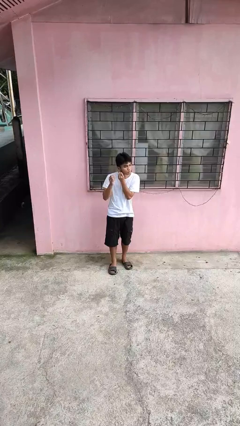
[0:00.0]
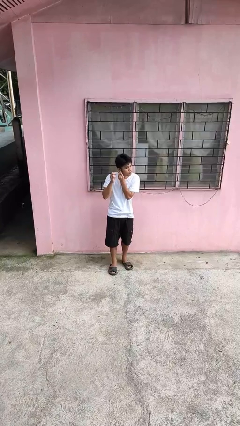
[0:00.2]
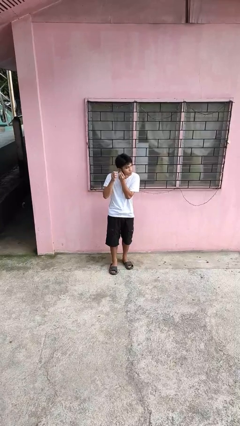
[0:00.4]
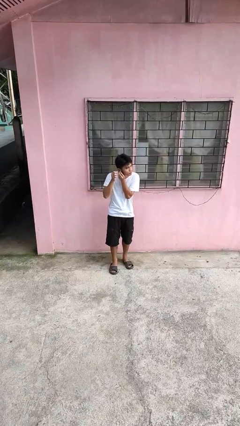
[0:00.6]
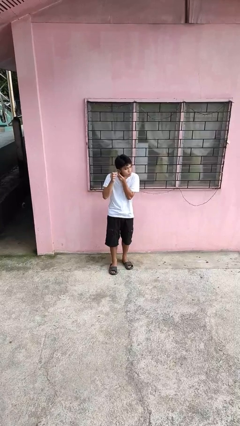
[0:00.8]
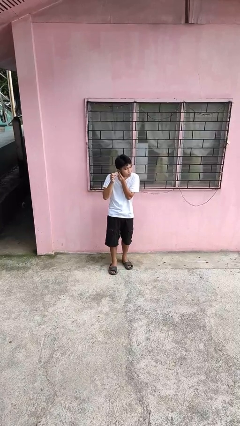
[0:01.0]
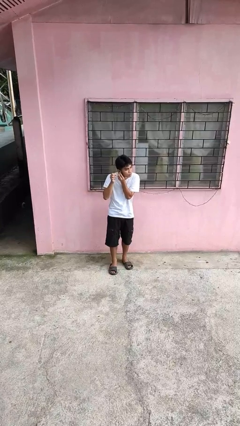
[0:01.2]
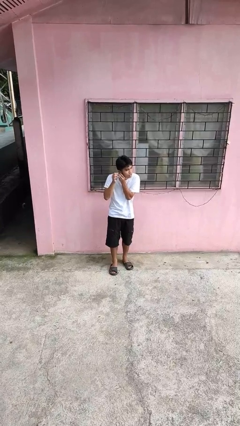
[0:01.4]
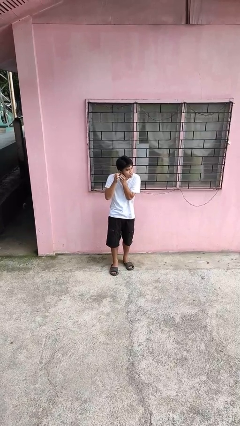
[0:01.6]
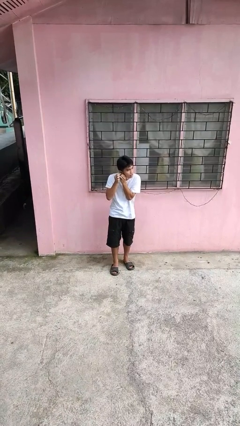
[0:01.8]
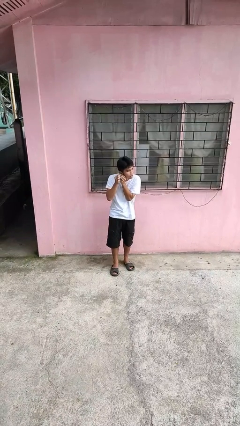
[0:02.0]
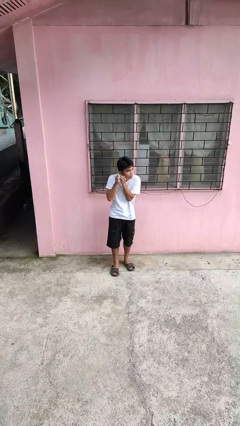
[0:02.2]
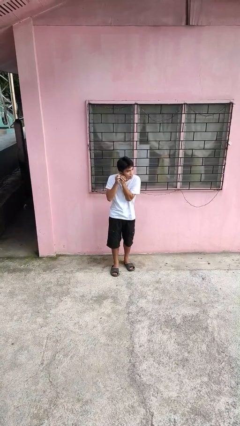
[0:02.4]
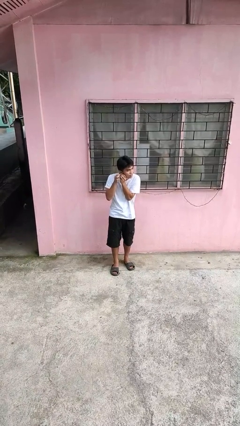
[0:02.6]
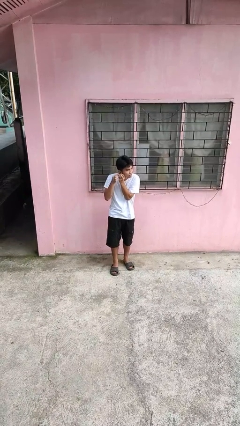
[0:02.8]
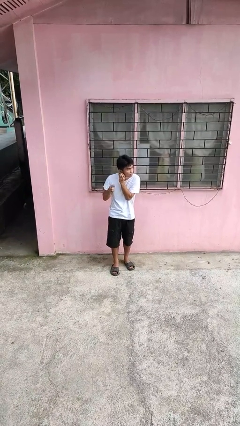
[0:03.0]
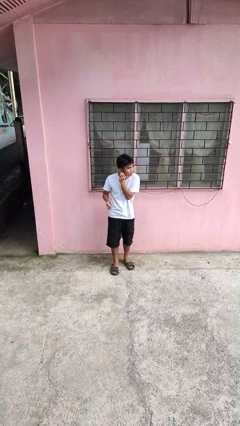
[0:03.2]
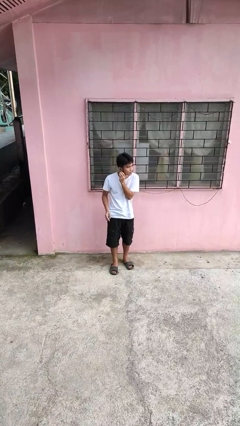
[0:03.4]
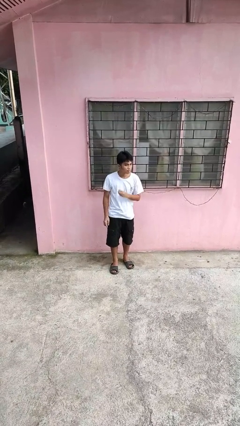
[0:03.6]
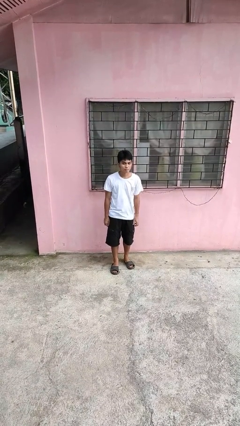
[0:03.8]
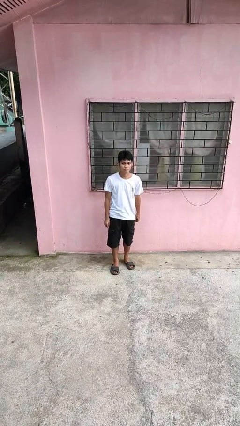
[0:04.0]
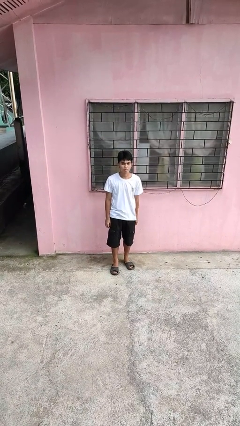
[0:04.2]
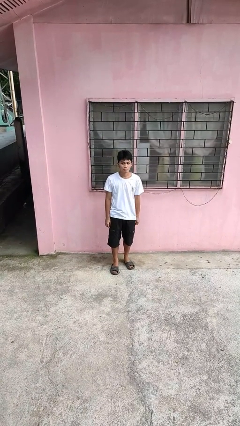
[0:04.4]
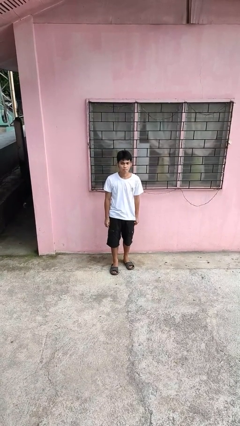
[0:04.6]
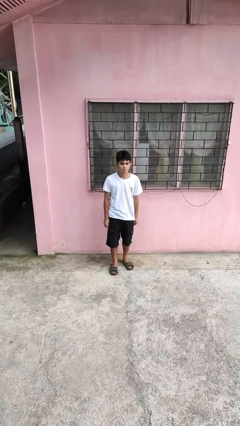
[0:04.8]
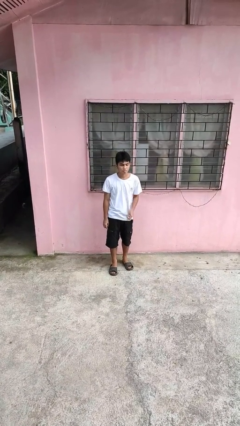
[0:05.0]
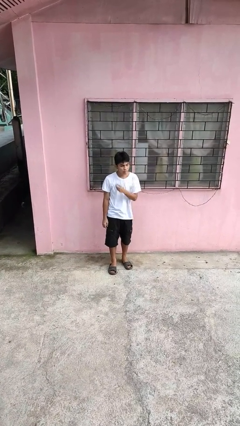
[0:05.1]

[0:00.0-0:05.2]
person puts on earrings

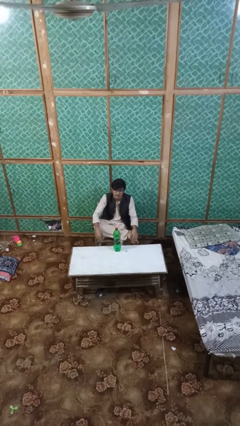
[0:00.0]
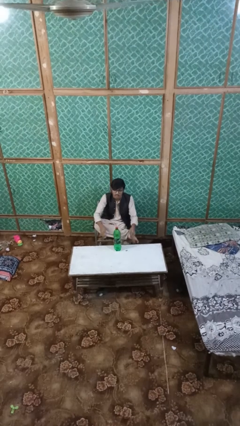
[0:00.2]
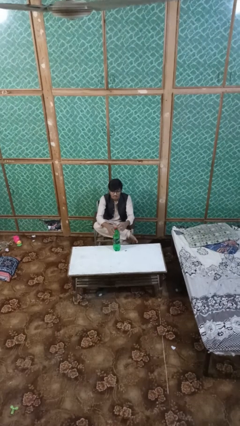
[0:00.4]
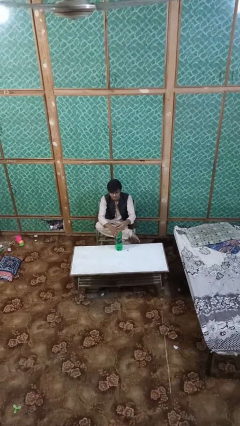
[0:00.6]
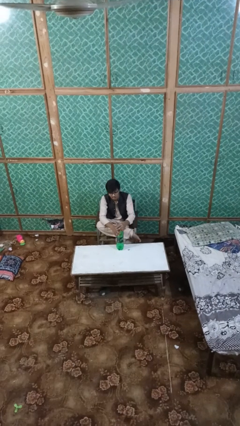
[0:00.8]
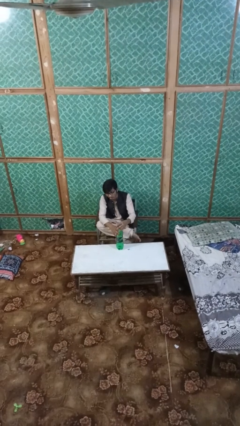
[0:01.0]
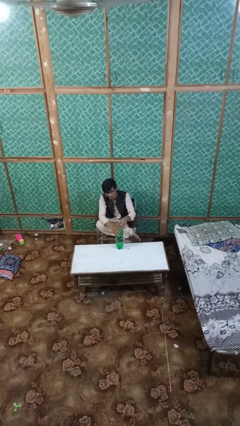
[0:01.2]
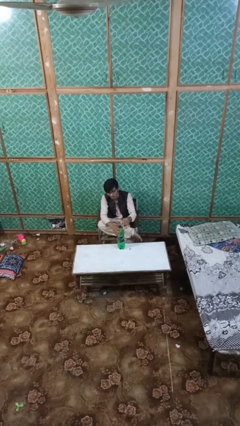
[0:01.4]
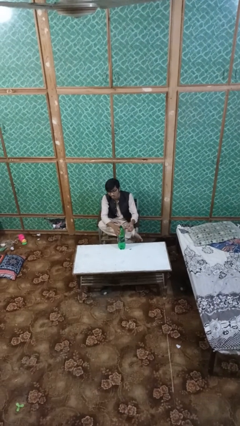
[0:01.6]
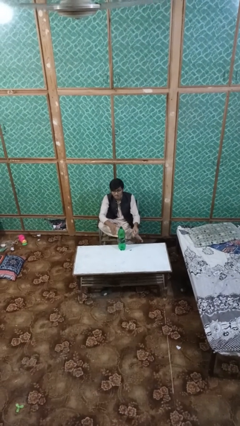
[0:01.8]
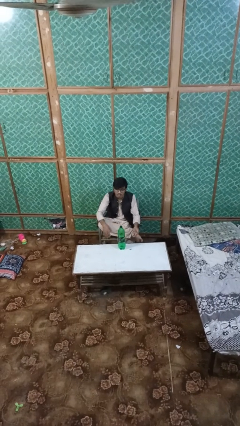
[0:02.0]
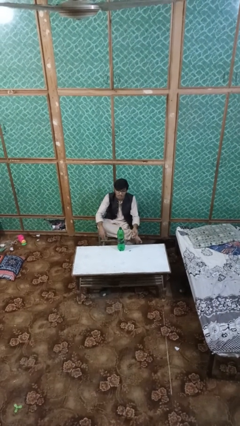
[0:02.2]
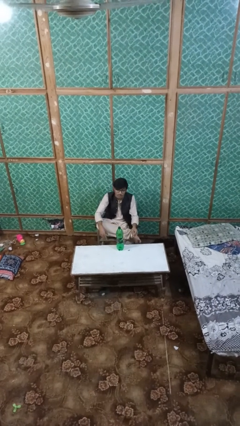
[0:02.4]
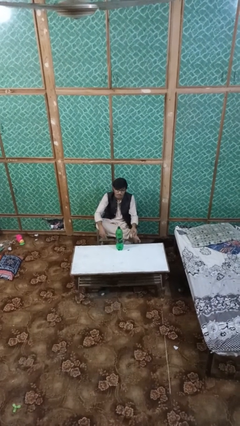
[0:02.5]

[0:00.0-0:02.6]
person unscrews lid from bottle

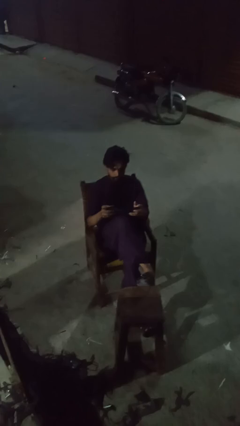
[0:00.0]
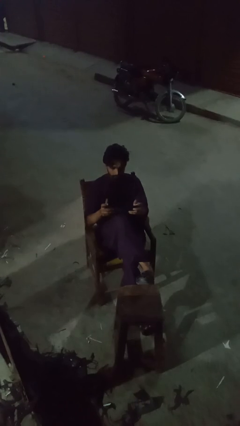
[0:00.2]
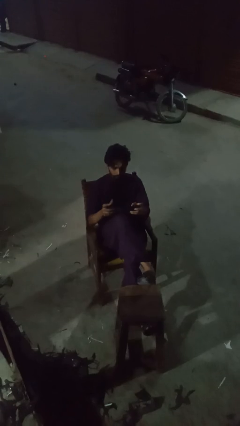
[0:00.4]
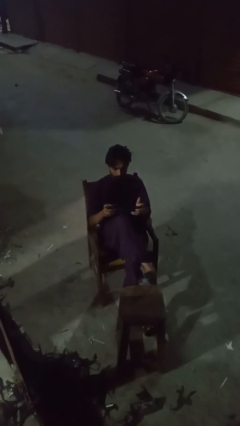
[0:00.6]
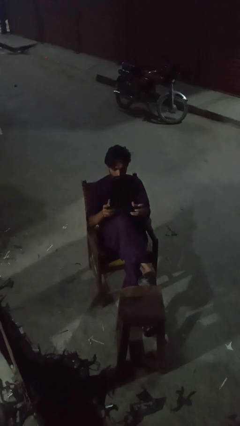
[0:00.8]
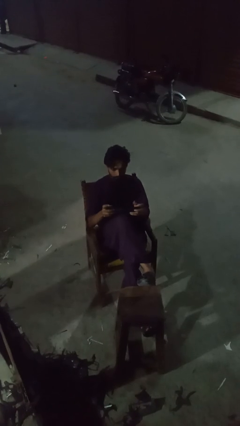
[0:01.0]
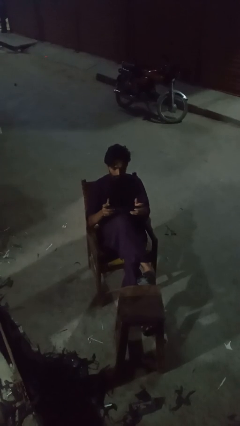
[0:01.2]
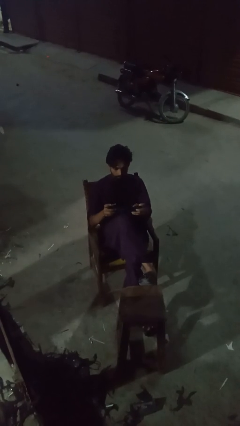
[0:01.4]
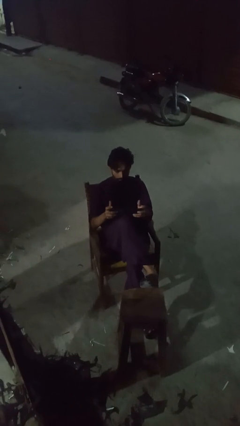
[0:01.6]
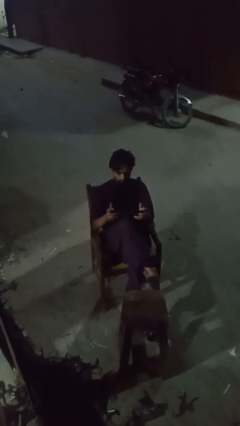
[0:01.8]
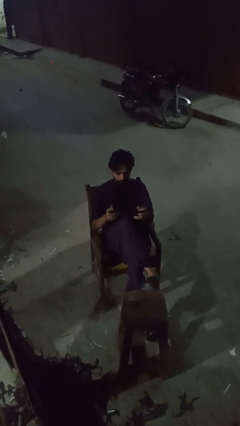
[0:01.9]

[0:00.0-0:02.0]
person interacts with handheld game

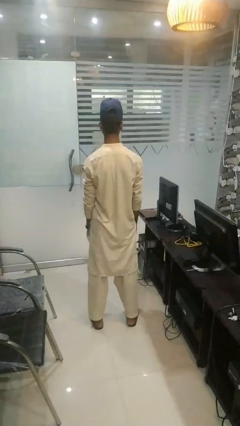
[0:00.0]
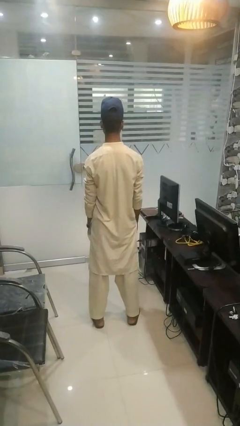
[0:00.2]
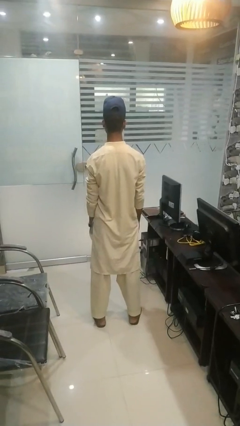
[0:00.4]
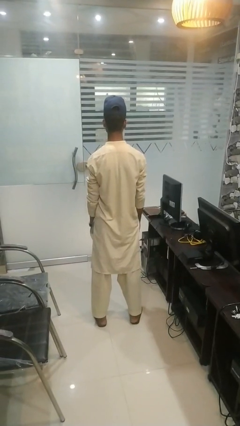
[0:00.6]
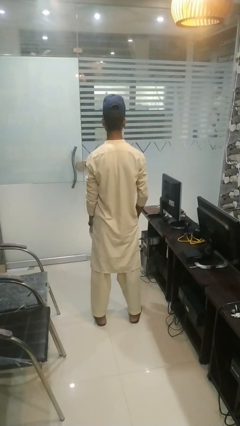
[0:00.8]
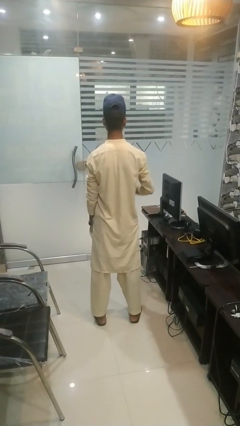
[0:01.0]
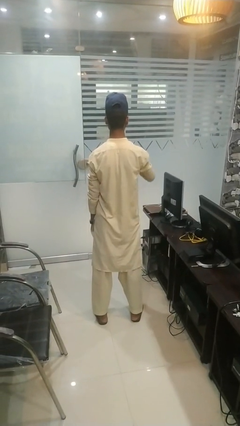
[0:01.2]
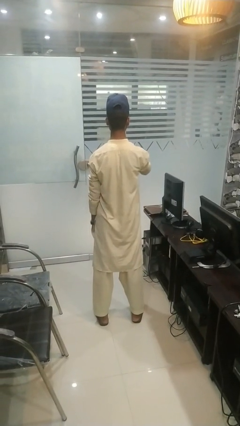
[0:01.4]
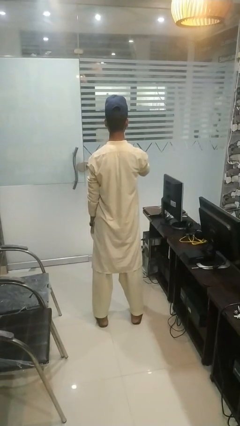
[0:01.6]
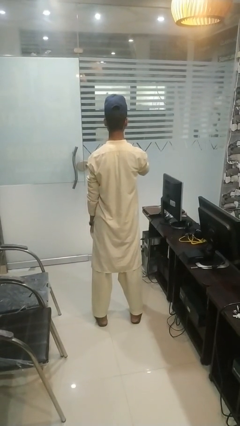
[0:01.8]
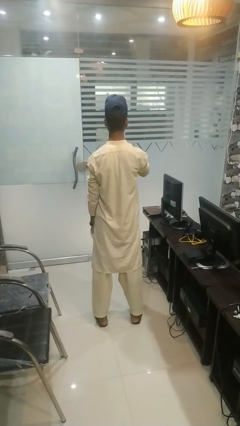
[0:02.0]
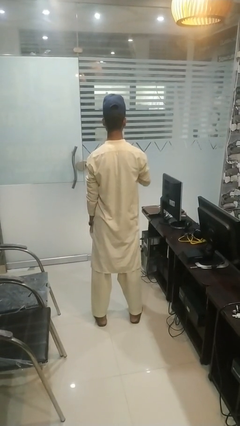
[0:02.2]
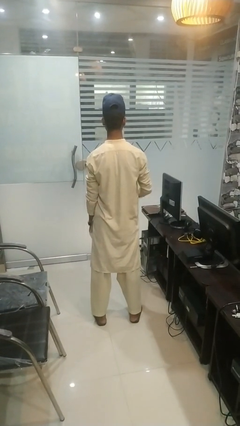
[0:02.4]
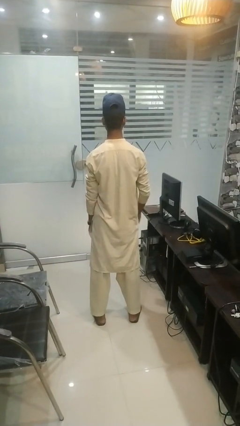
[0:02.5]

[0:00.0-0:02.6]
person gestures be quiet

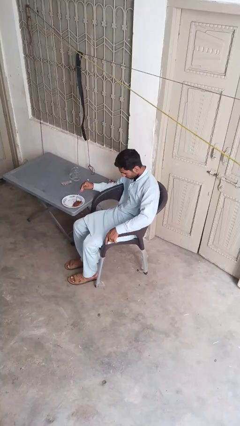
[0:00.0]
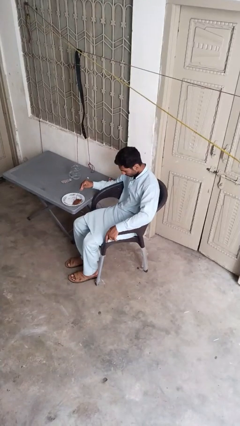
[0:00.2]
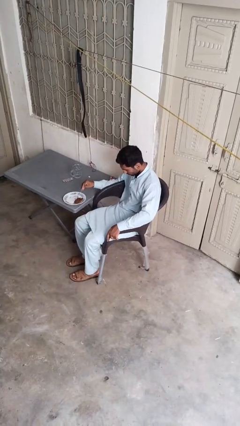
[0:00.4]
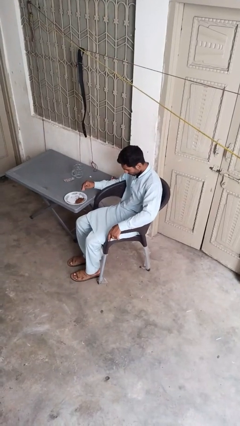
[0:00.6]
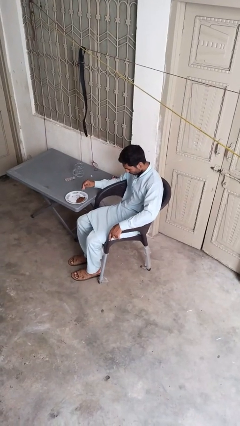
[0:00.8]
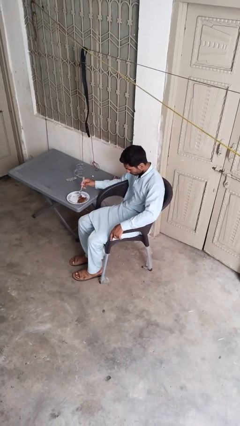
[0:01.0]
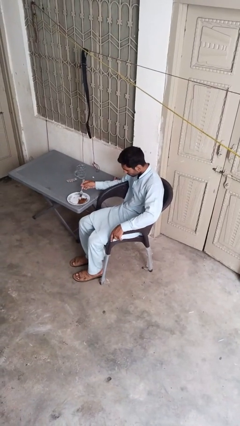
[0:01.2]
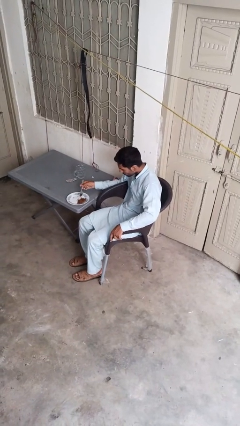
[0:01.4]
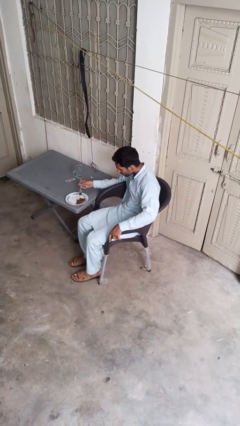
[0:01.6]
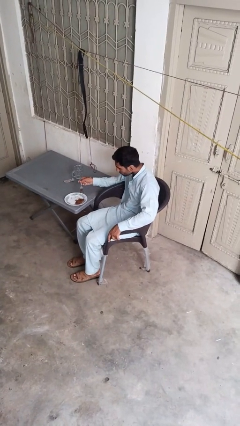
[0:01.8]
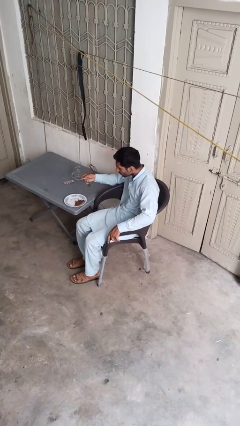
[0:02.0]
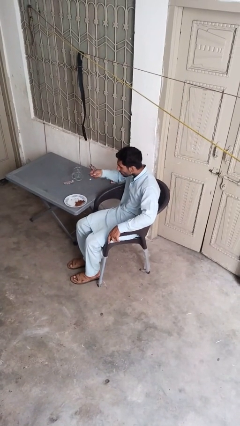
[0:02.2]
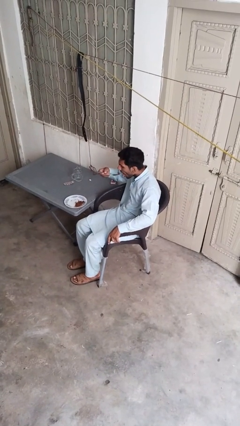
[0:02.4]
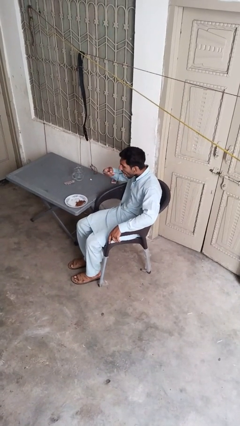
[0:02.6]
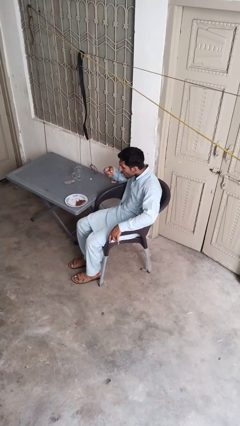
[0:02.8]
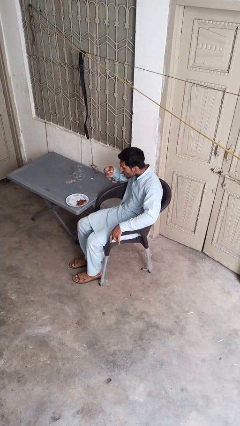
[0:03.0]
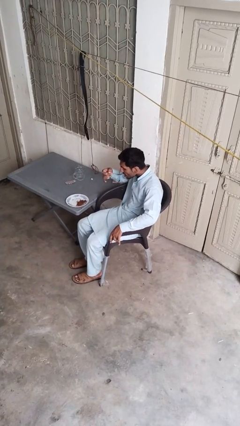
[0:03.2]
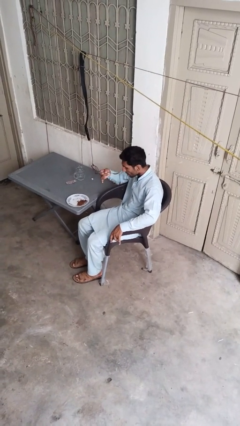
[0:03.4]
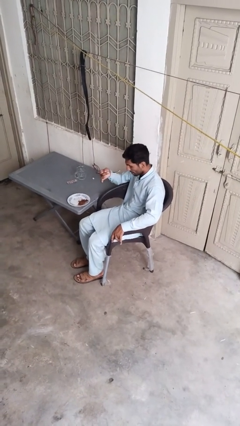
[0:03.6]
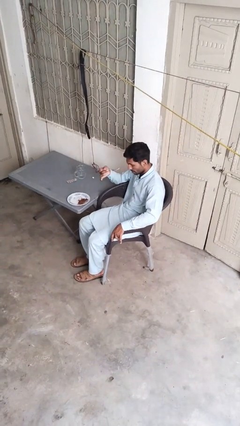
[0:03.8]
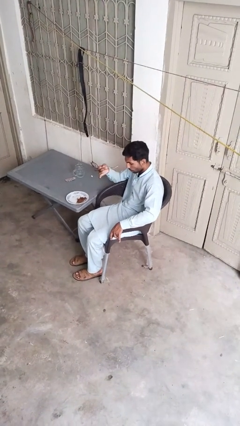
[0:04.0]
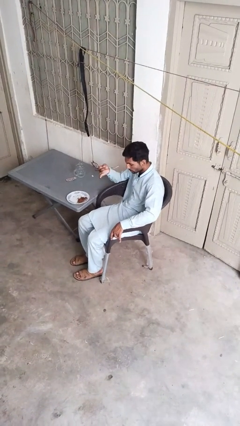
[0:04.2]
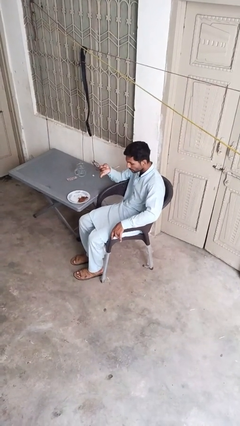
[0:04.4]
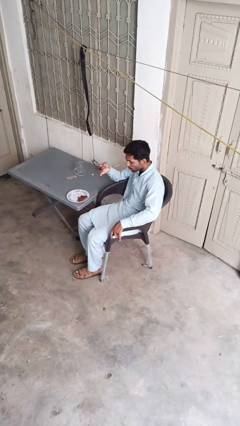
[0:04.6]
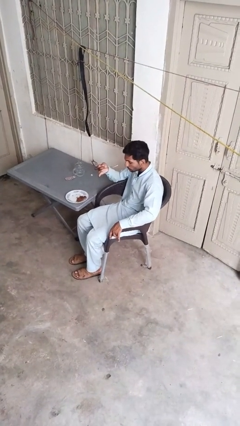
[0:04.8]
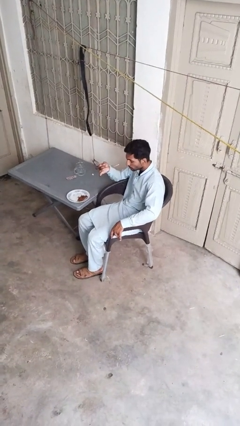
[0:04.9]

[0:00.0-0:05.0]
person eats with utensil

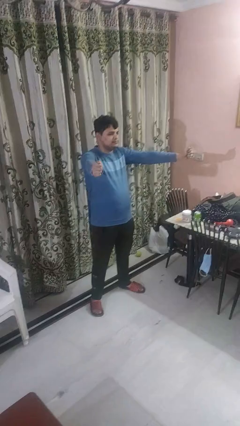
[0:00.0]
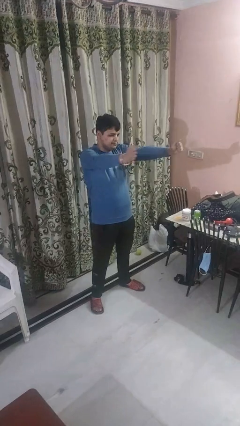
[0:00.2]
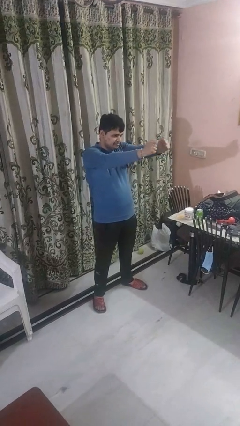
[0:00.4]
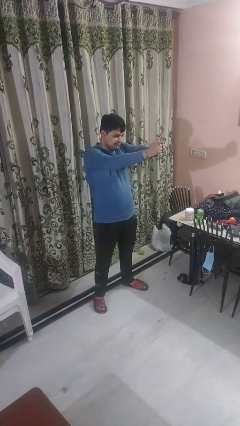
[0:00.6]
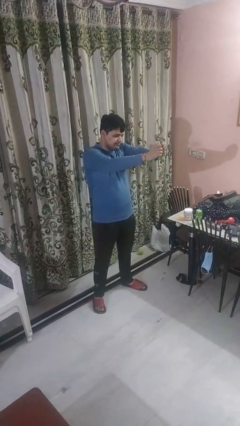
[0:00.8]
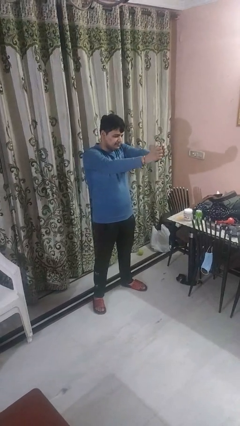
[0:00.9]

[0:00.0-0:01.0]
person gestures zoom out
